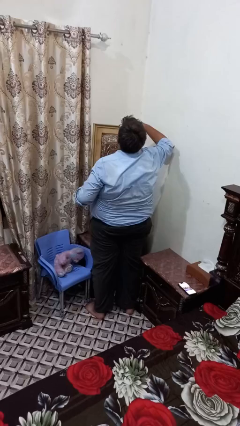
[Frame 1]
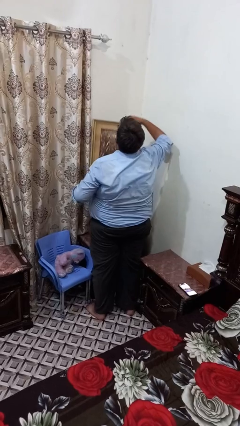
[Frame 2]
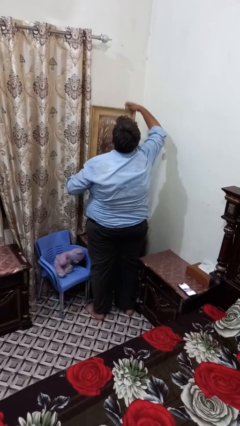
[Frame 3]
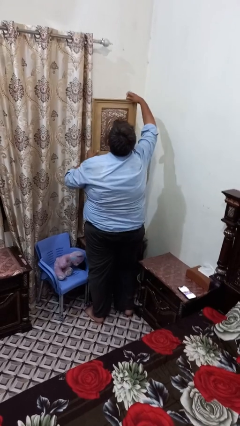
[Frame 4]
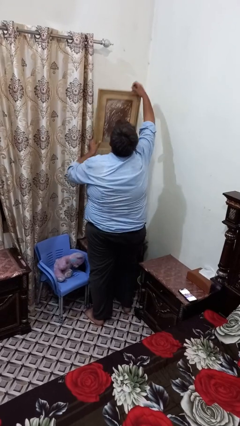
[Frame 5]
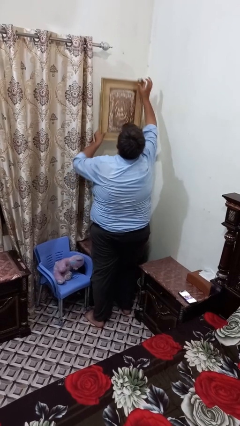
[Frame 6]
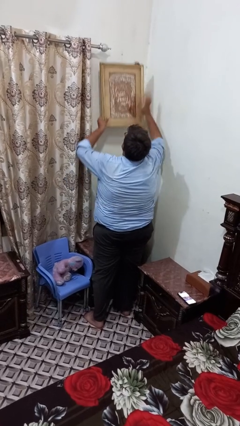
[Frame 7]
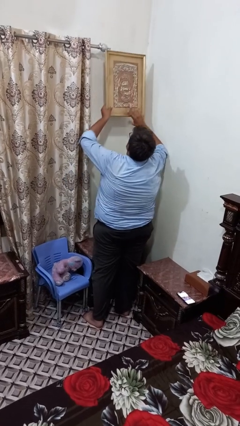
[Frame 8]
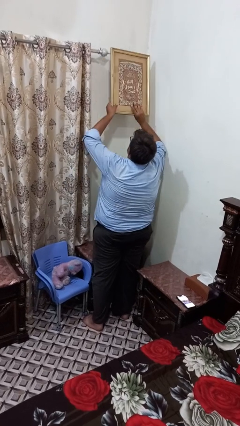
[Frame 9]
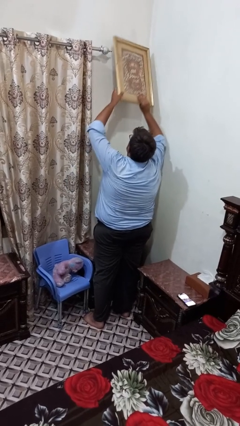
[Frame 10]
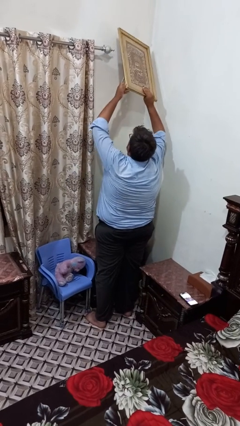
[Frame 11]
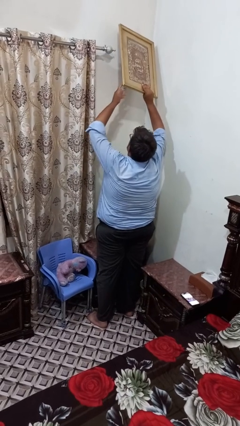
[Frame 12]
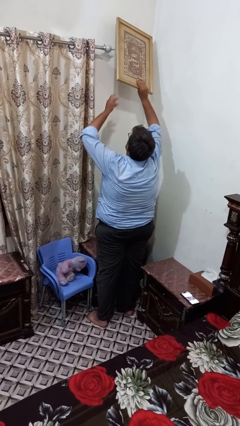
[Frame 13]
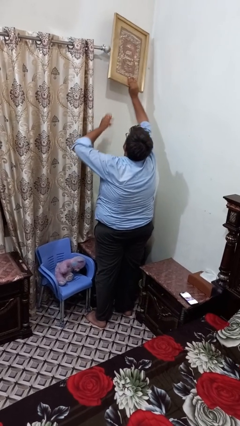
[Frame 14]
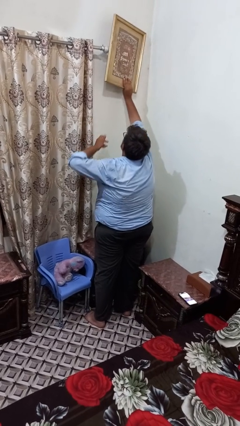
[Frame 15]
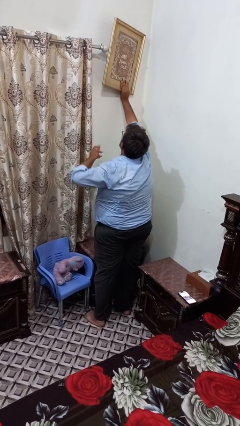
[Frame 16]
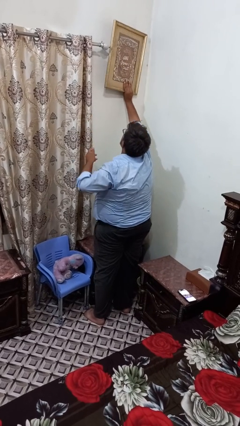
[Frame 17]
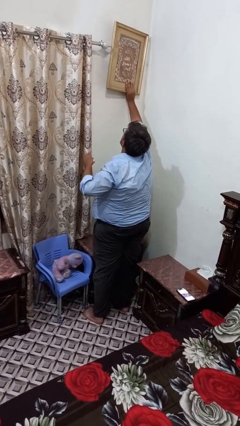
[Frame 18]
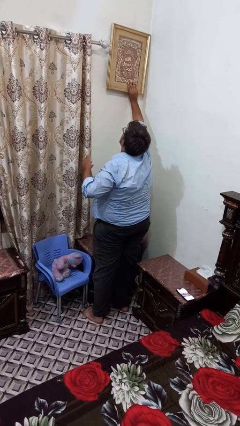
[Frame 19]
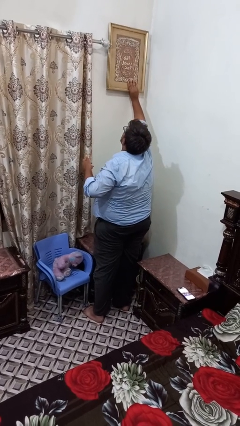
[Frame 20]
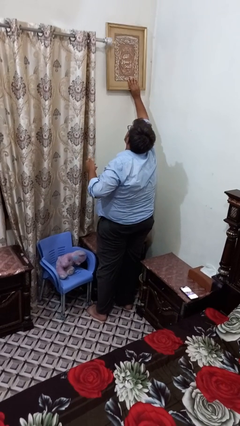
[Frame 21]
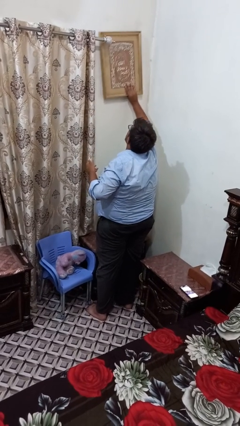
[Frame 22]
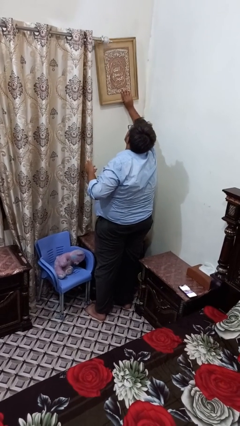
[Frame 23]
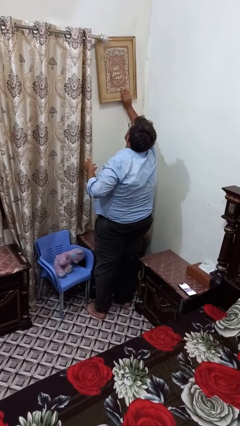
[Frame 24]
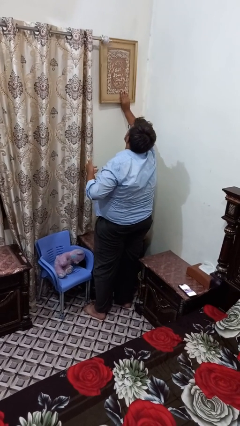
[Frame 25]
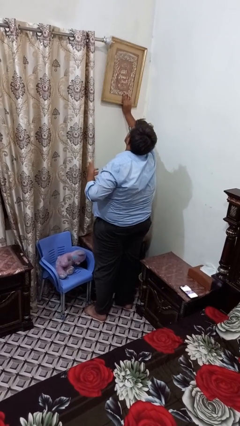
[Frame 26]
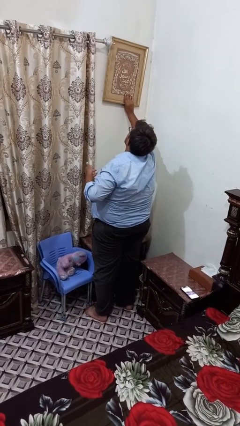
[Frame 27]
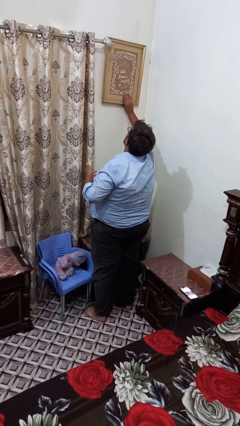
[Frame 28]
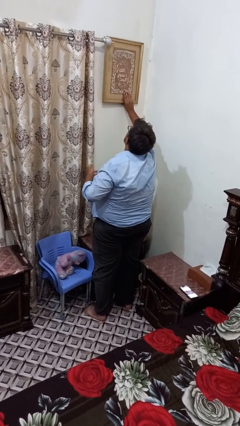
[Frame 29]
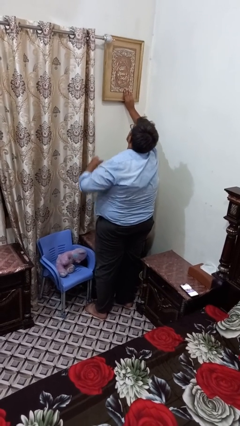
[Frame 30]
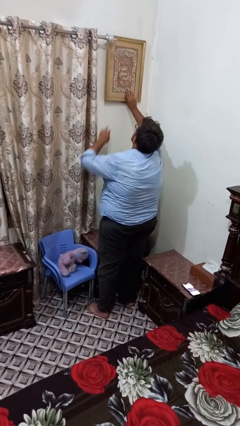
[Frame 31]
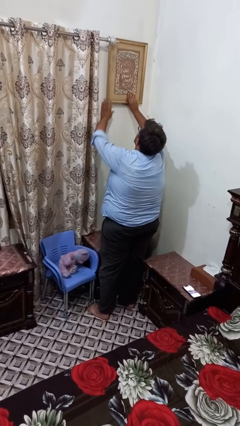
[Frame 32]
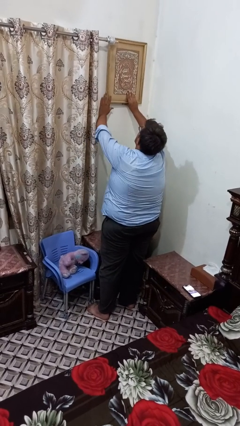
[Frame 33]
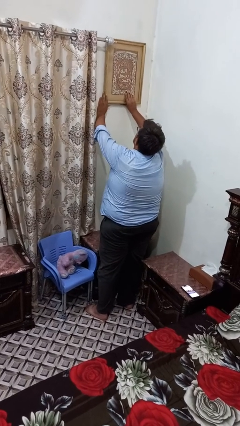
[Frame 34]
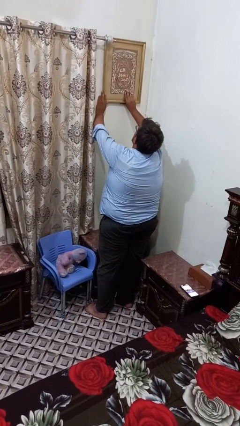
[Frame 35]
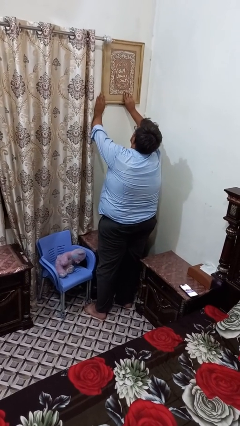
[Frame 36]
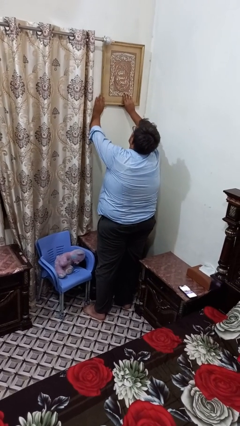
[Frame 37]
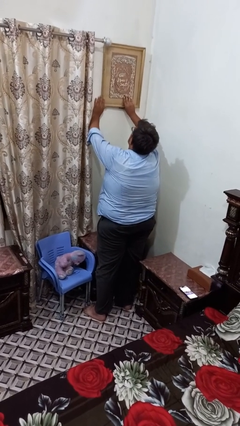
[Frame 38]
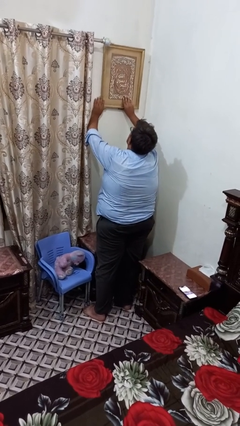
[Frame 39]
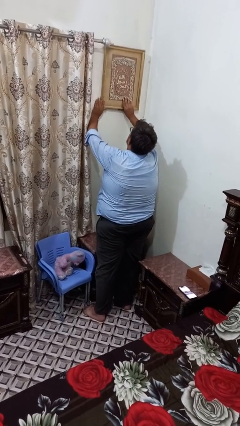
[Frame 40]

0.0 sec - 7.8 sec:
person puts up picture frame

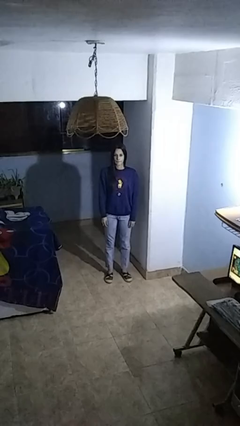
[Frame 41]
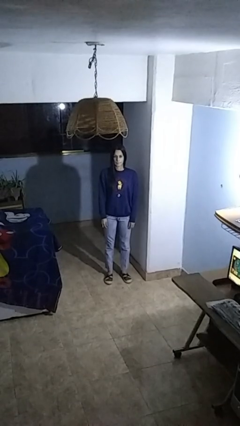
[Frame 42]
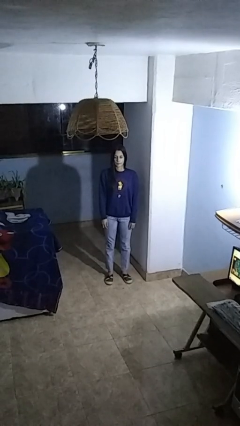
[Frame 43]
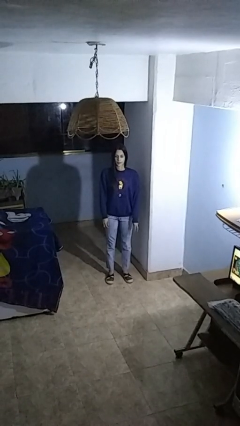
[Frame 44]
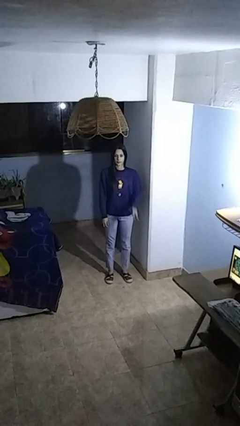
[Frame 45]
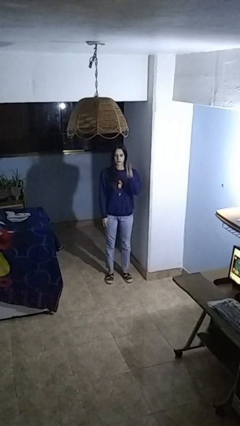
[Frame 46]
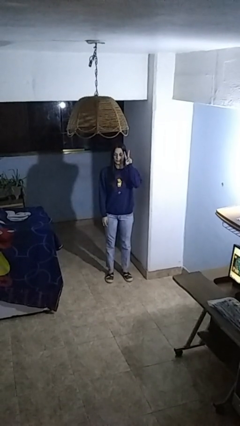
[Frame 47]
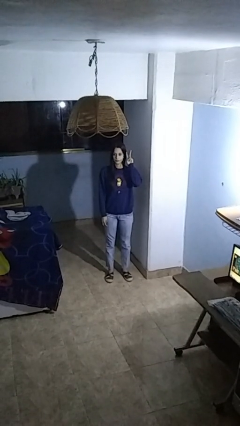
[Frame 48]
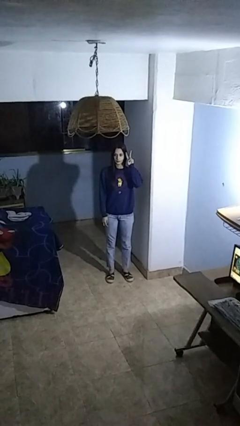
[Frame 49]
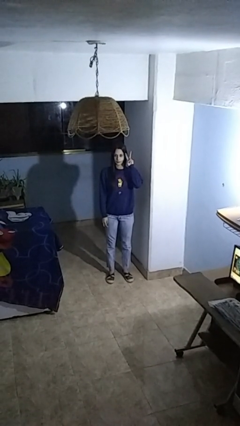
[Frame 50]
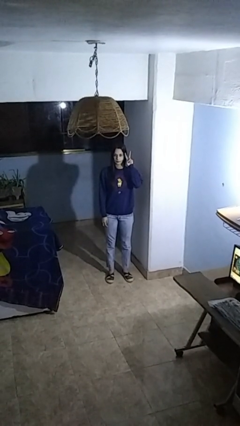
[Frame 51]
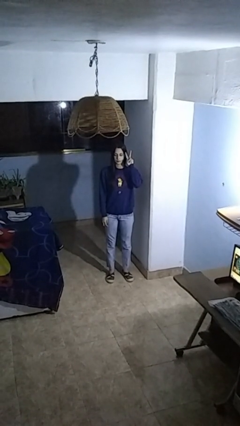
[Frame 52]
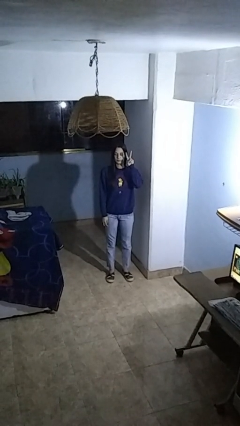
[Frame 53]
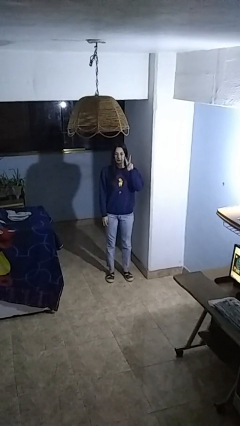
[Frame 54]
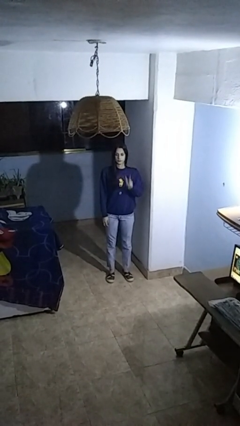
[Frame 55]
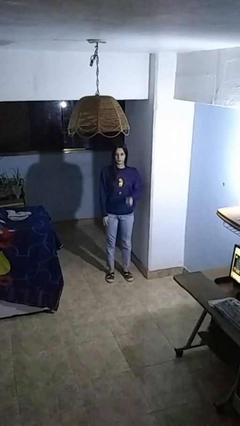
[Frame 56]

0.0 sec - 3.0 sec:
person gestures peace

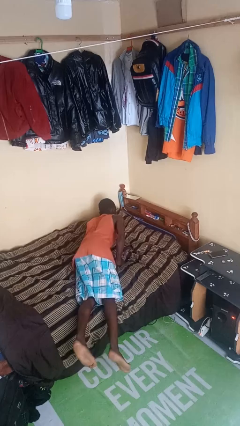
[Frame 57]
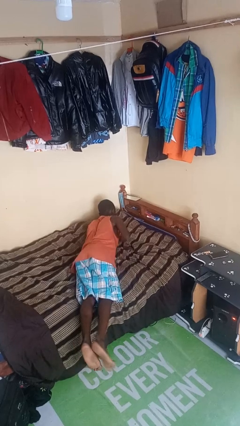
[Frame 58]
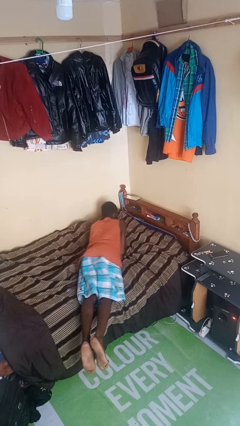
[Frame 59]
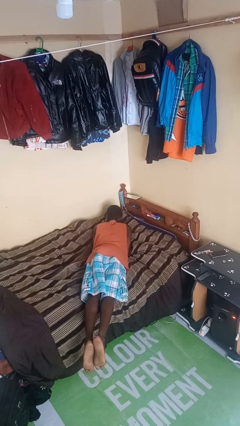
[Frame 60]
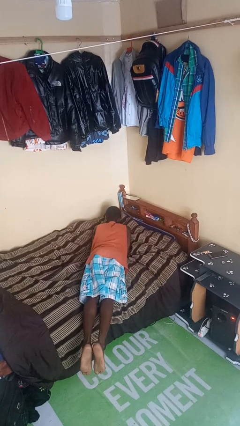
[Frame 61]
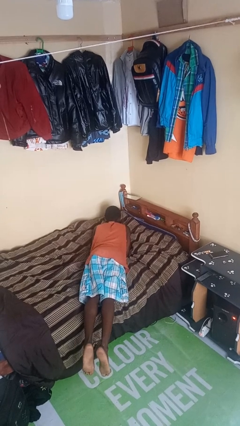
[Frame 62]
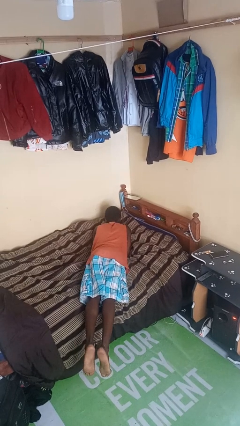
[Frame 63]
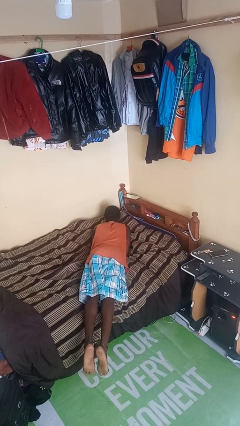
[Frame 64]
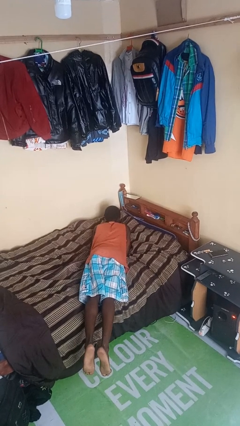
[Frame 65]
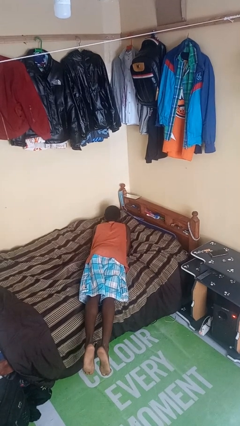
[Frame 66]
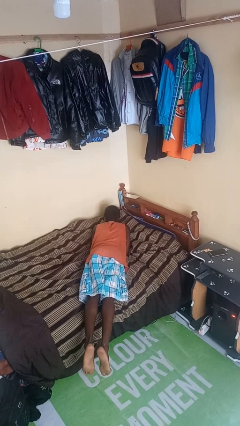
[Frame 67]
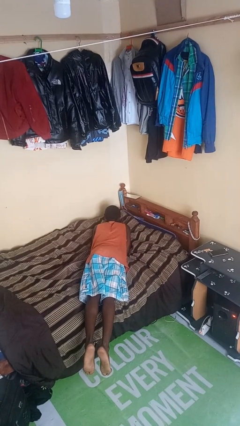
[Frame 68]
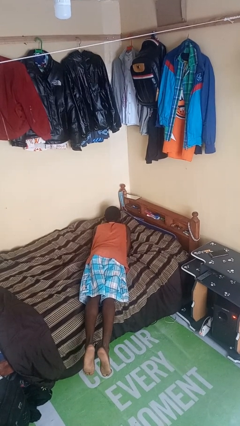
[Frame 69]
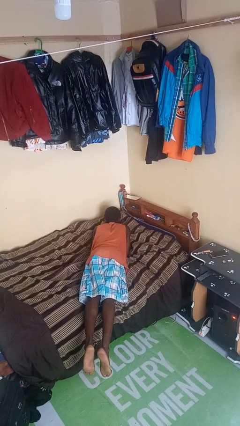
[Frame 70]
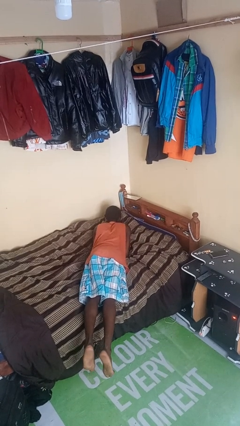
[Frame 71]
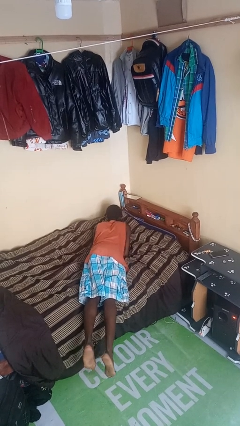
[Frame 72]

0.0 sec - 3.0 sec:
person lies down on bed

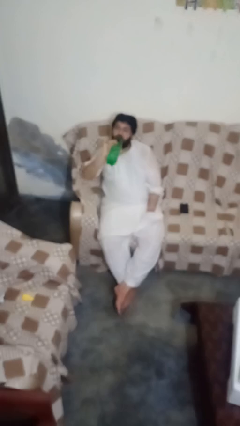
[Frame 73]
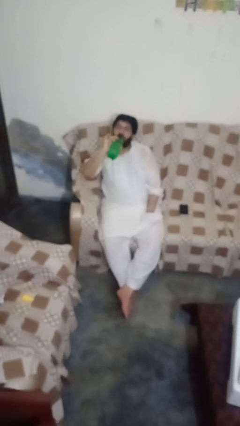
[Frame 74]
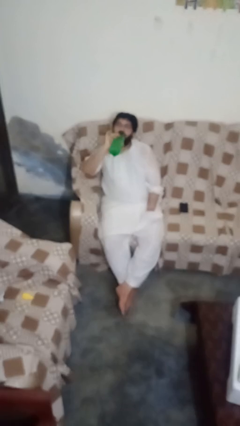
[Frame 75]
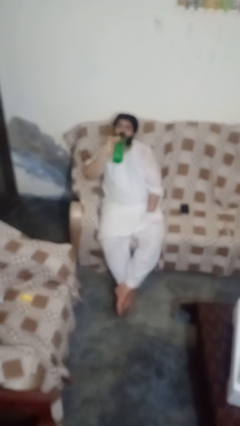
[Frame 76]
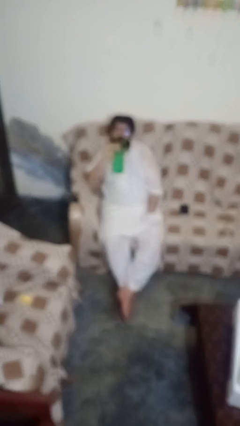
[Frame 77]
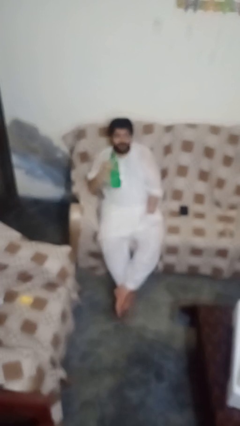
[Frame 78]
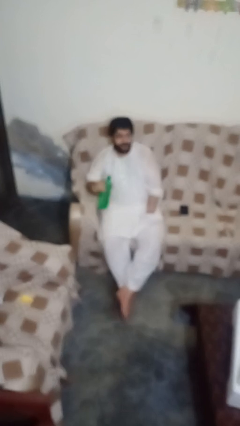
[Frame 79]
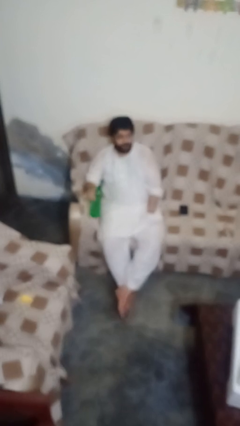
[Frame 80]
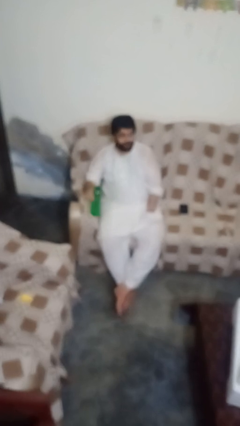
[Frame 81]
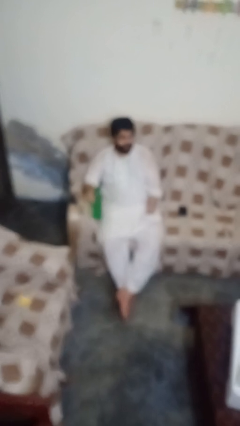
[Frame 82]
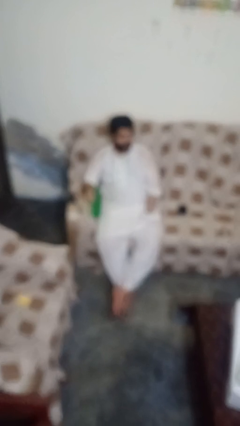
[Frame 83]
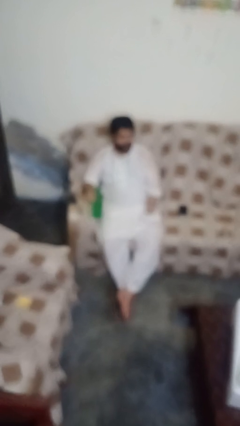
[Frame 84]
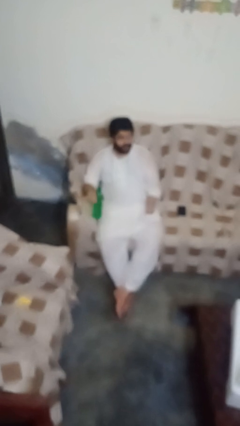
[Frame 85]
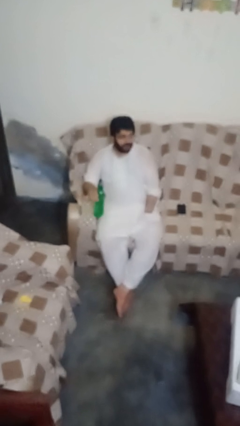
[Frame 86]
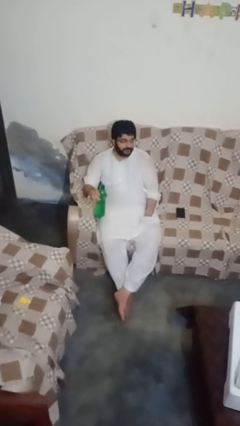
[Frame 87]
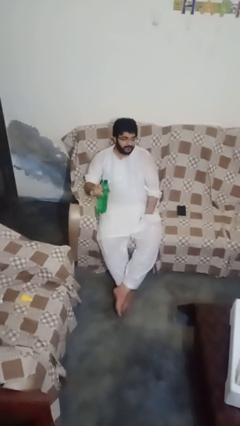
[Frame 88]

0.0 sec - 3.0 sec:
person drinks from bottle

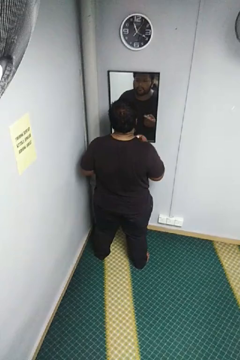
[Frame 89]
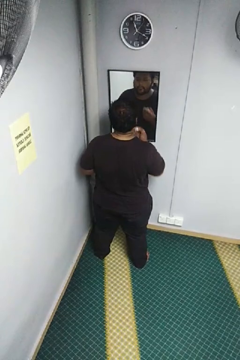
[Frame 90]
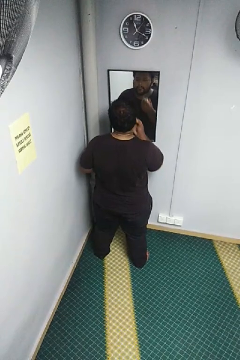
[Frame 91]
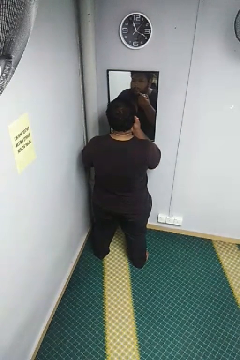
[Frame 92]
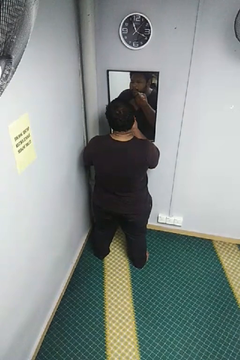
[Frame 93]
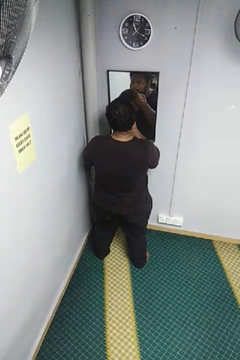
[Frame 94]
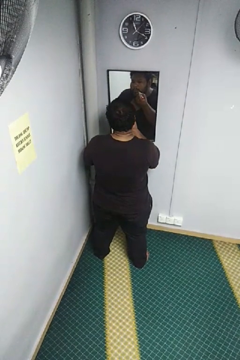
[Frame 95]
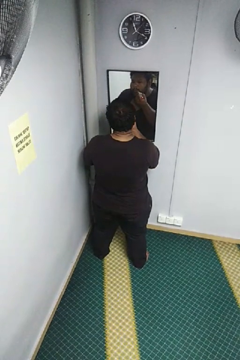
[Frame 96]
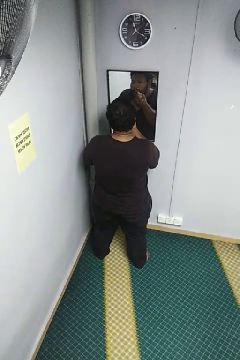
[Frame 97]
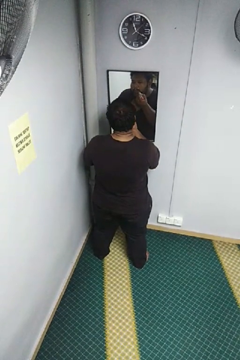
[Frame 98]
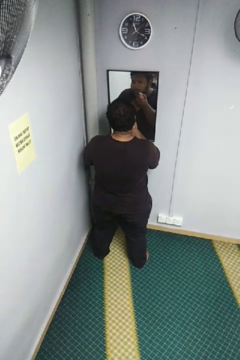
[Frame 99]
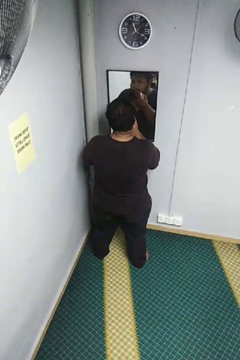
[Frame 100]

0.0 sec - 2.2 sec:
person applies lip makeup
